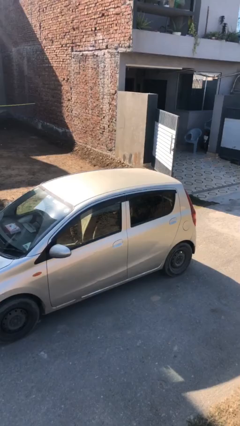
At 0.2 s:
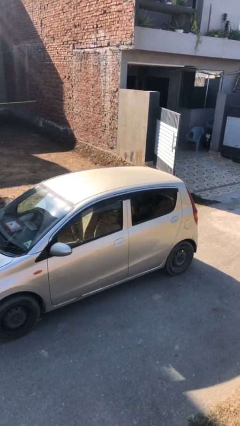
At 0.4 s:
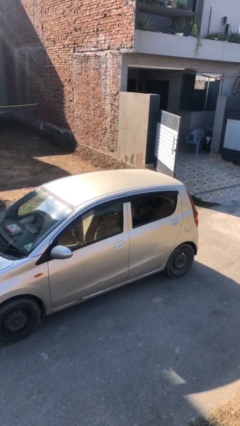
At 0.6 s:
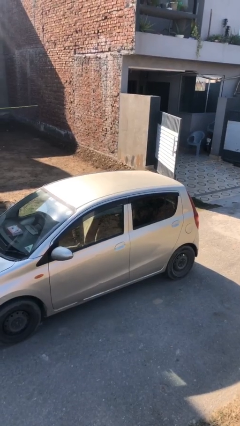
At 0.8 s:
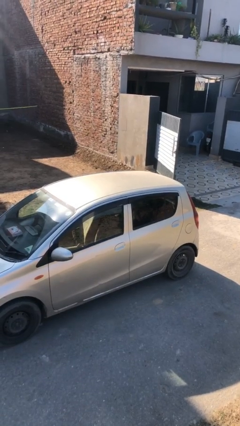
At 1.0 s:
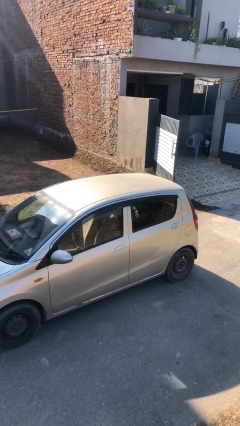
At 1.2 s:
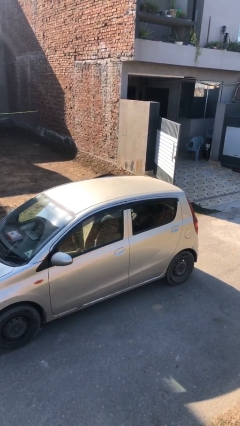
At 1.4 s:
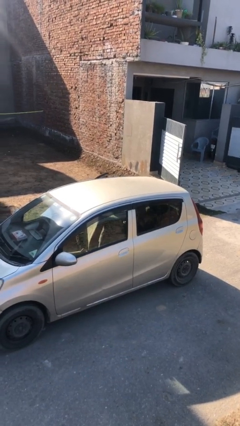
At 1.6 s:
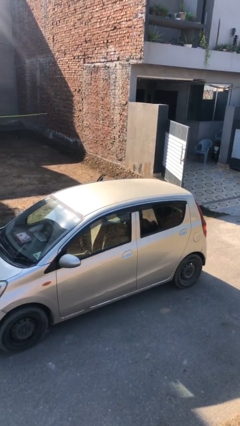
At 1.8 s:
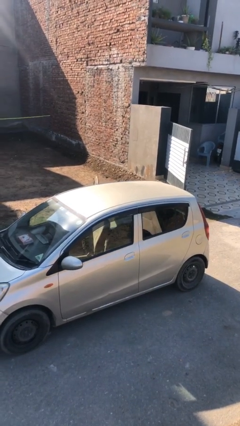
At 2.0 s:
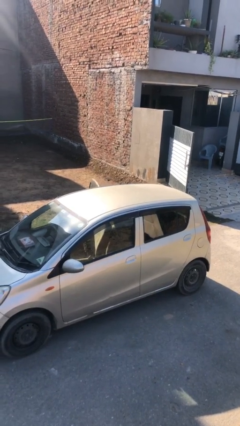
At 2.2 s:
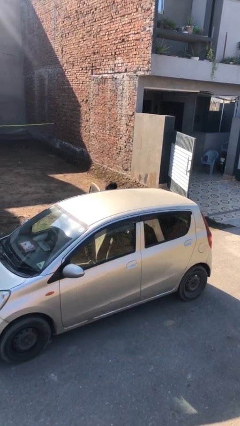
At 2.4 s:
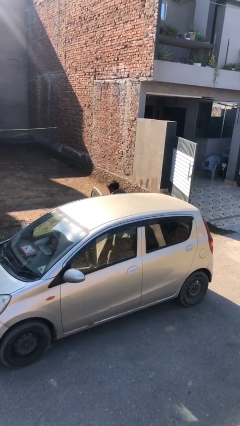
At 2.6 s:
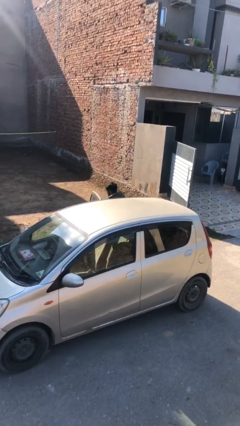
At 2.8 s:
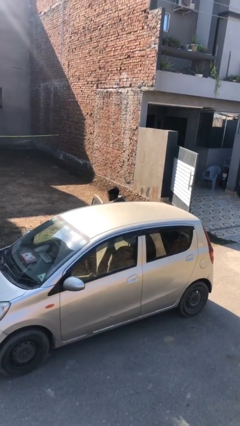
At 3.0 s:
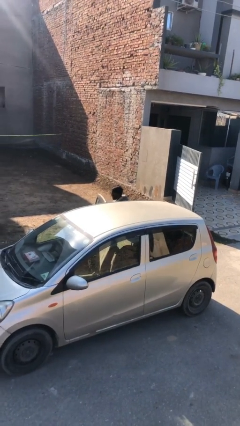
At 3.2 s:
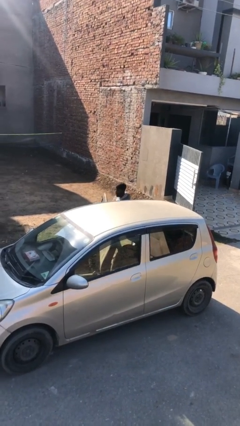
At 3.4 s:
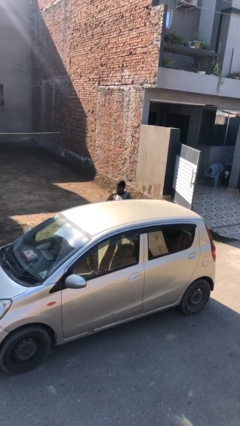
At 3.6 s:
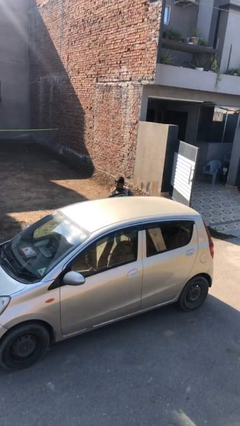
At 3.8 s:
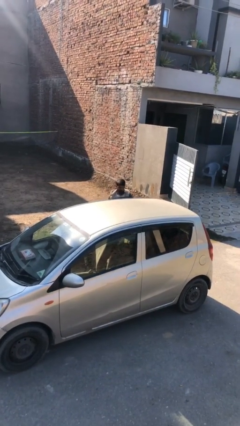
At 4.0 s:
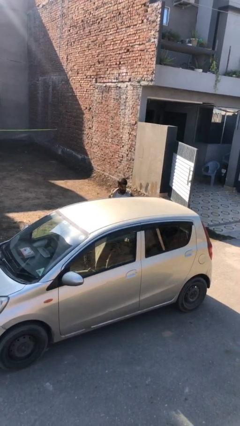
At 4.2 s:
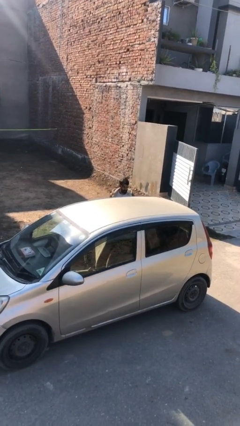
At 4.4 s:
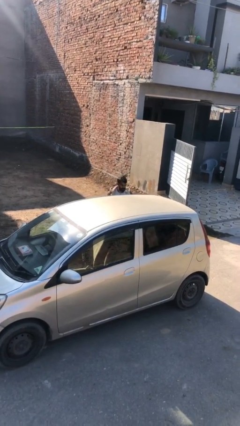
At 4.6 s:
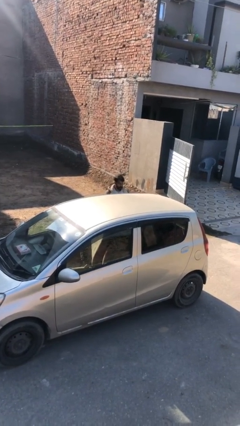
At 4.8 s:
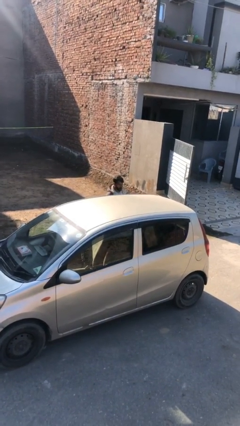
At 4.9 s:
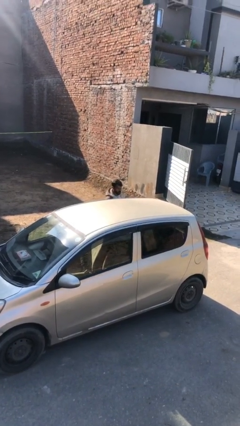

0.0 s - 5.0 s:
car drops off person

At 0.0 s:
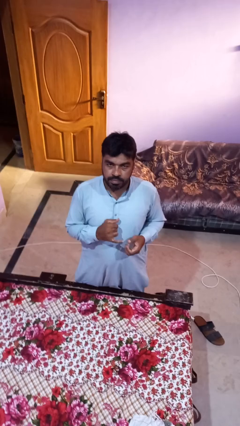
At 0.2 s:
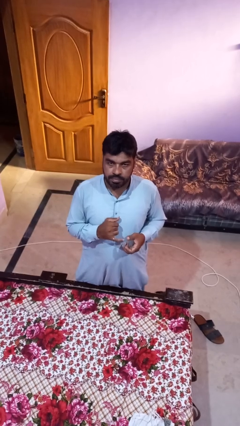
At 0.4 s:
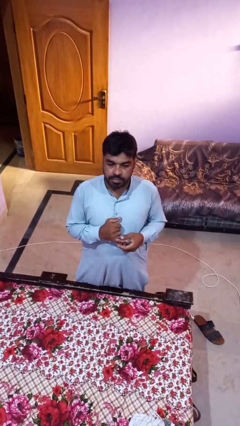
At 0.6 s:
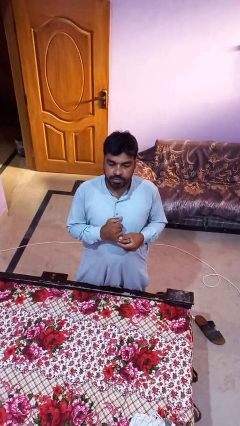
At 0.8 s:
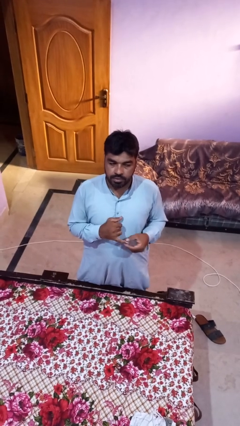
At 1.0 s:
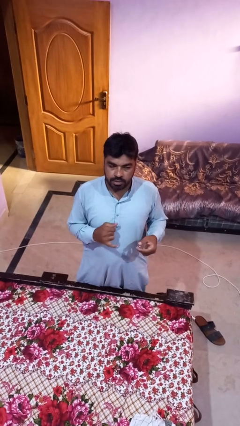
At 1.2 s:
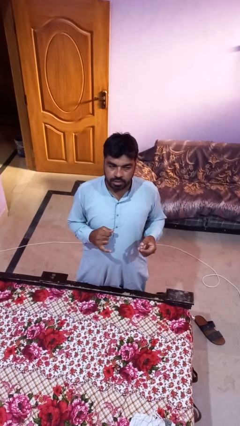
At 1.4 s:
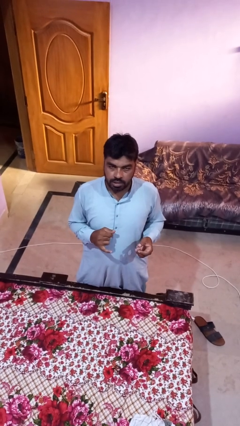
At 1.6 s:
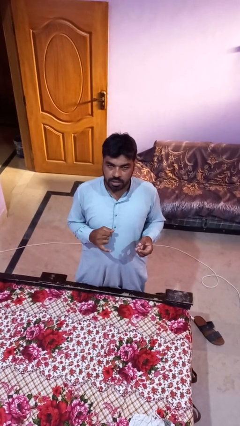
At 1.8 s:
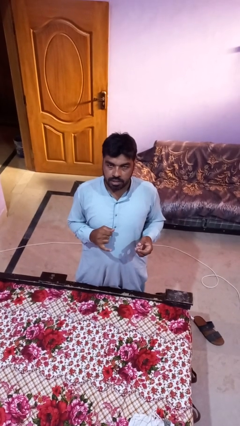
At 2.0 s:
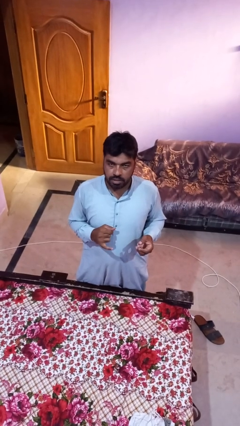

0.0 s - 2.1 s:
person takes off ring

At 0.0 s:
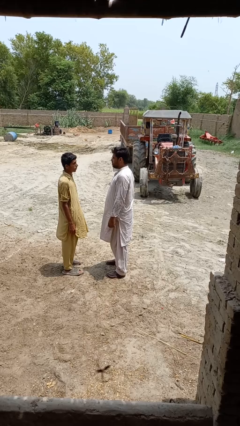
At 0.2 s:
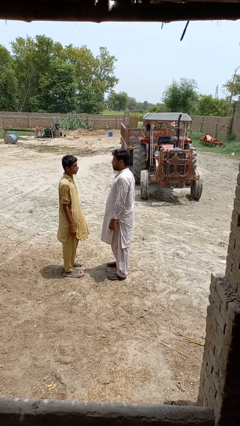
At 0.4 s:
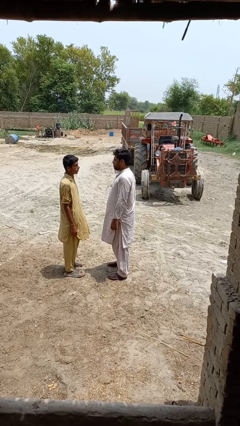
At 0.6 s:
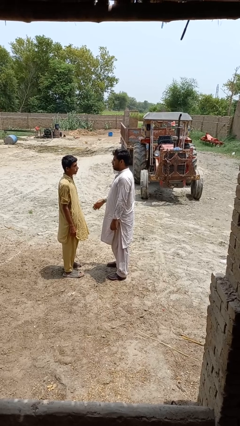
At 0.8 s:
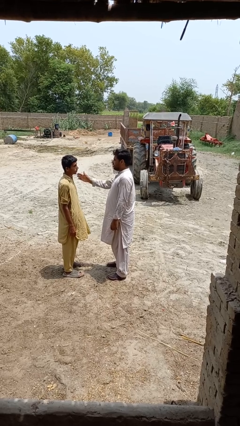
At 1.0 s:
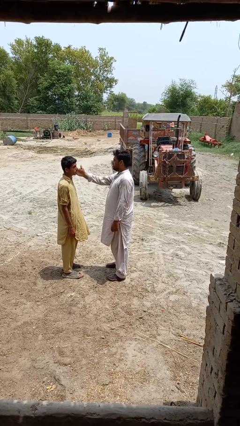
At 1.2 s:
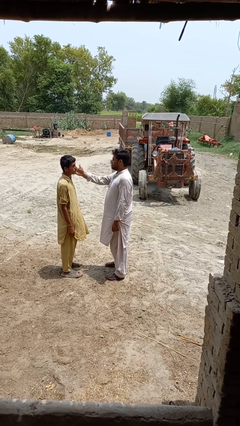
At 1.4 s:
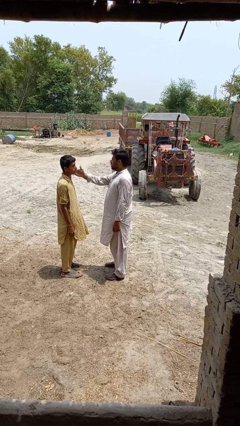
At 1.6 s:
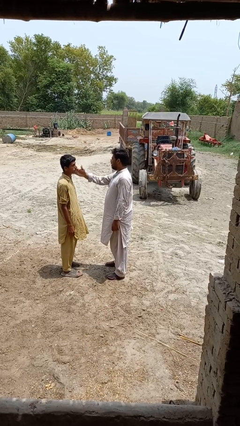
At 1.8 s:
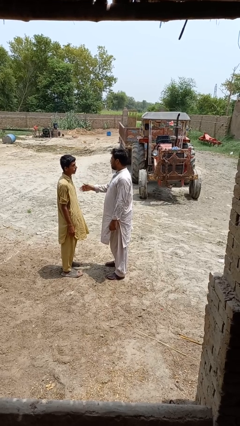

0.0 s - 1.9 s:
person touches face of person

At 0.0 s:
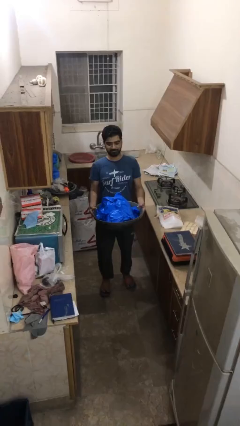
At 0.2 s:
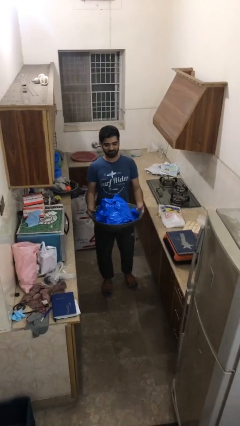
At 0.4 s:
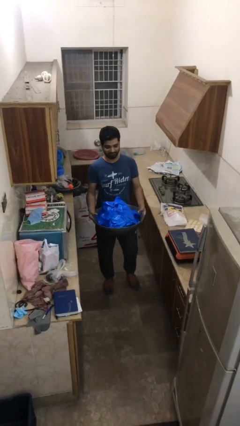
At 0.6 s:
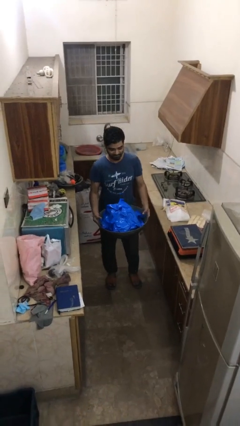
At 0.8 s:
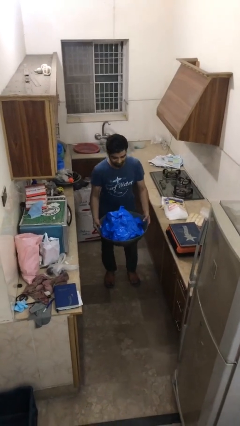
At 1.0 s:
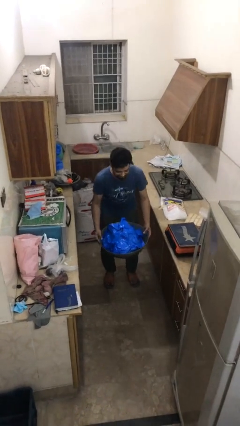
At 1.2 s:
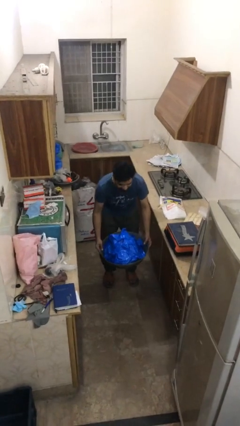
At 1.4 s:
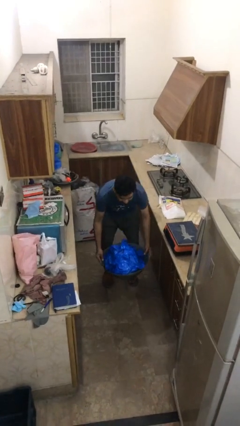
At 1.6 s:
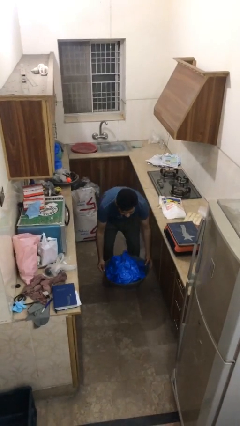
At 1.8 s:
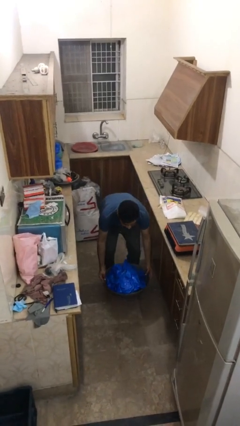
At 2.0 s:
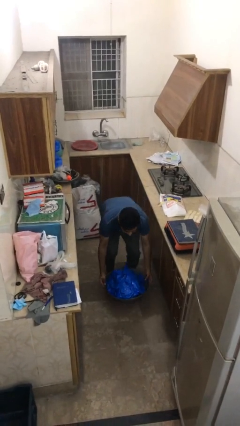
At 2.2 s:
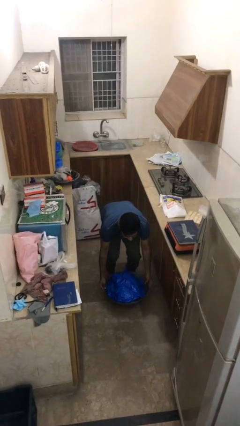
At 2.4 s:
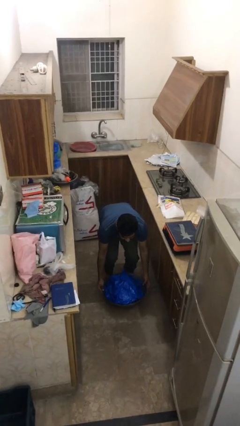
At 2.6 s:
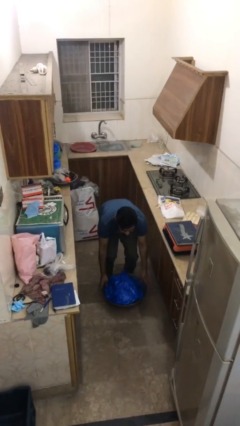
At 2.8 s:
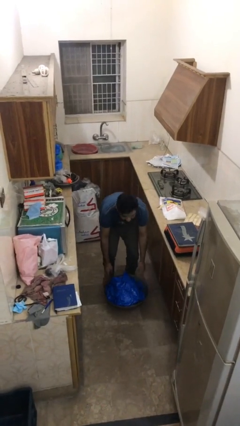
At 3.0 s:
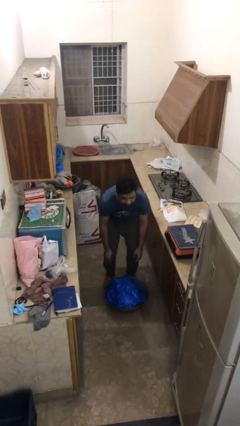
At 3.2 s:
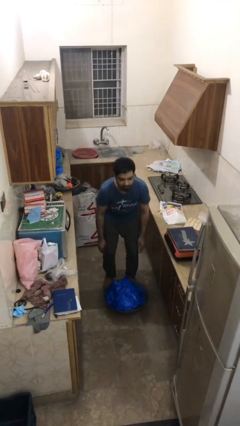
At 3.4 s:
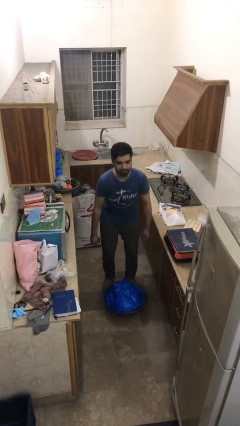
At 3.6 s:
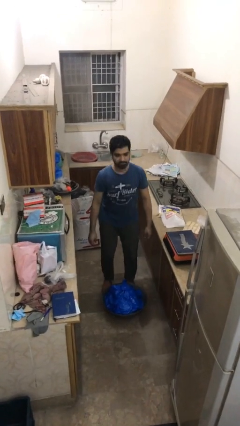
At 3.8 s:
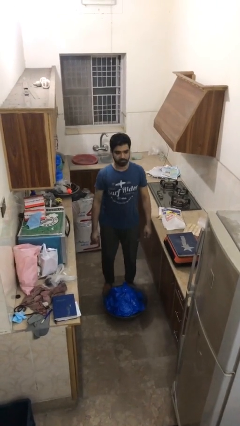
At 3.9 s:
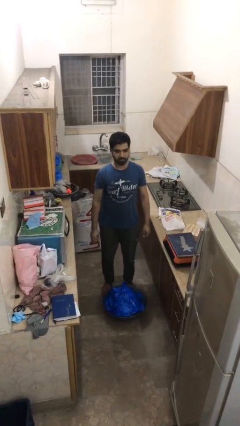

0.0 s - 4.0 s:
person puts down object on floor

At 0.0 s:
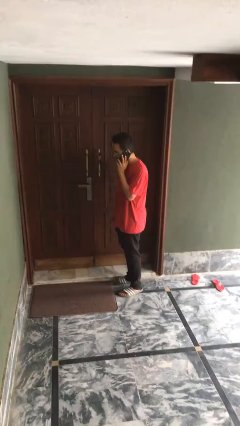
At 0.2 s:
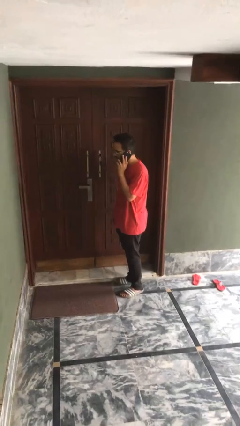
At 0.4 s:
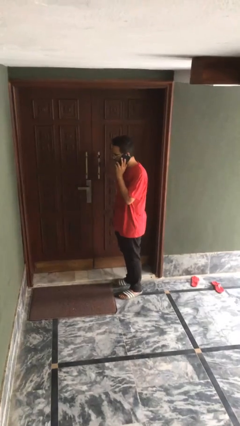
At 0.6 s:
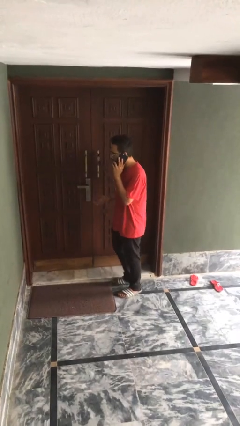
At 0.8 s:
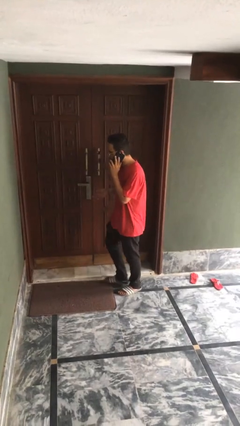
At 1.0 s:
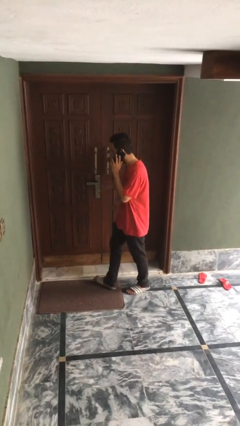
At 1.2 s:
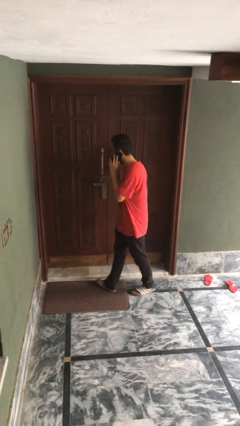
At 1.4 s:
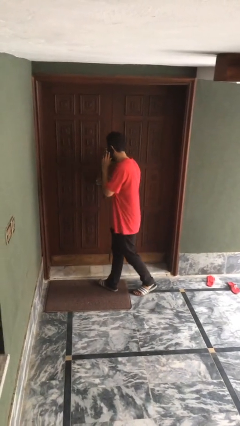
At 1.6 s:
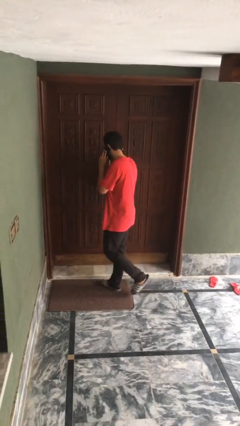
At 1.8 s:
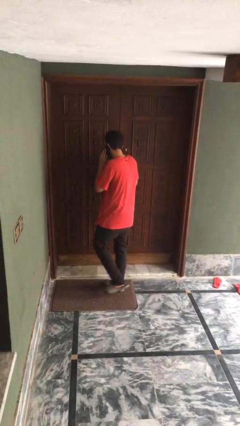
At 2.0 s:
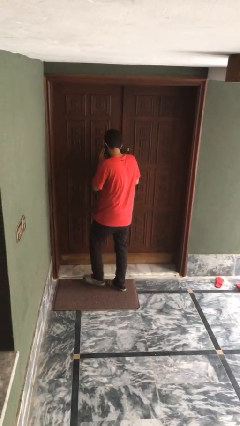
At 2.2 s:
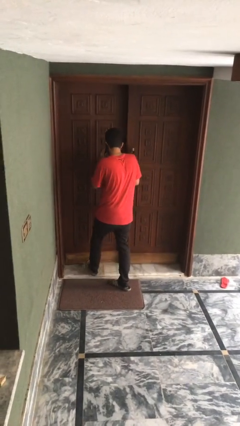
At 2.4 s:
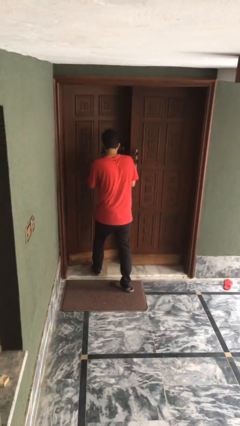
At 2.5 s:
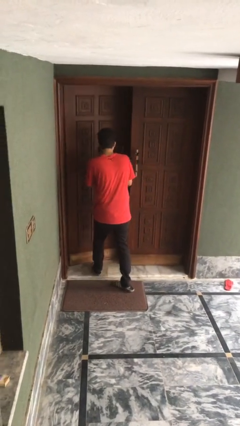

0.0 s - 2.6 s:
person opens facility door

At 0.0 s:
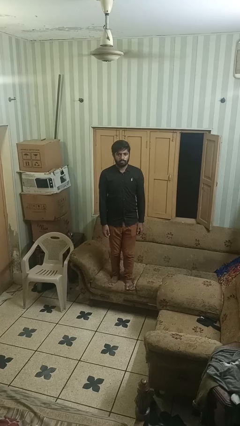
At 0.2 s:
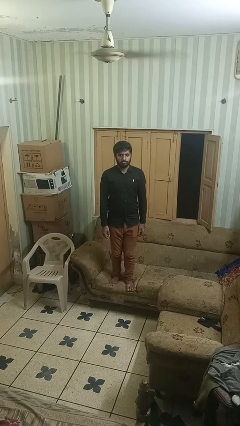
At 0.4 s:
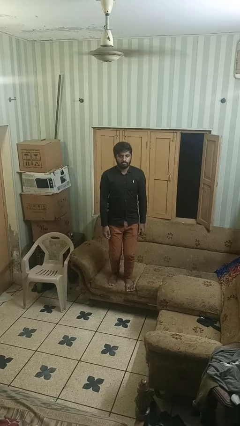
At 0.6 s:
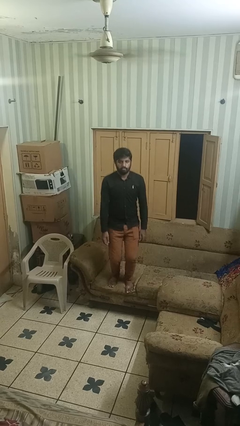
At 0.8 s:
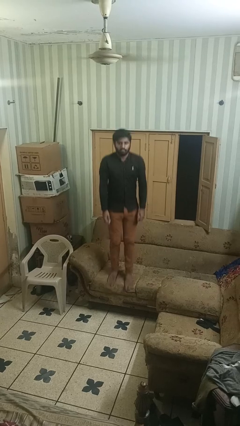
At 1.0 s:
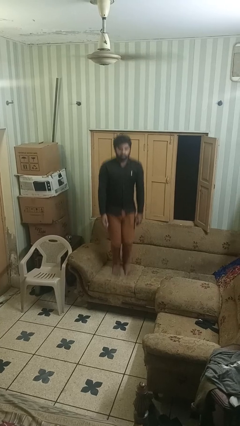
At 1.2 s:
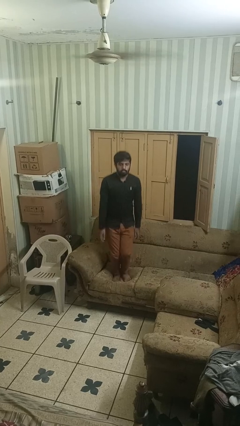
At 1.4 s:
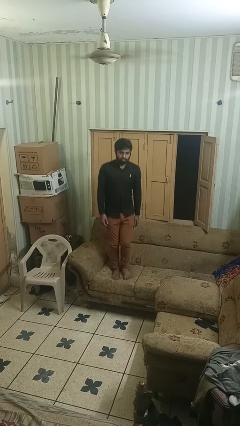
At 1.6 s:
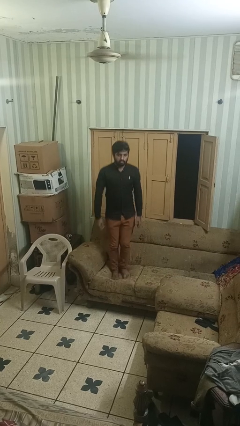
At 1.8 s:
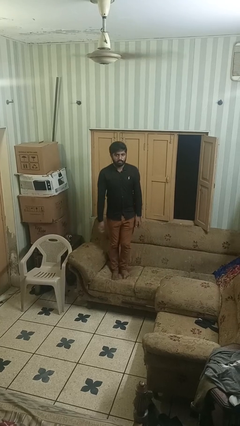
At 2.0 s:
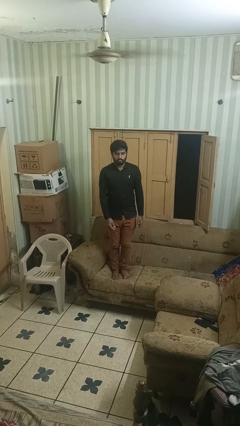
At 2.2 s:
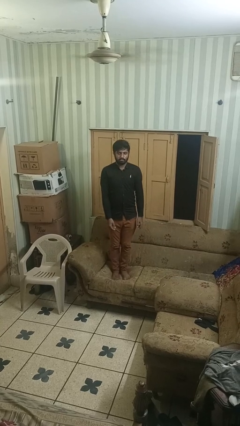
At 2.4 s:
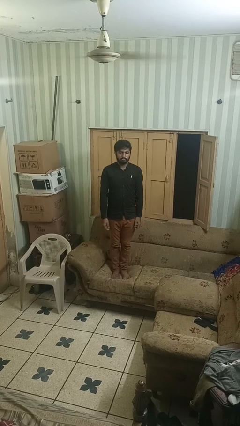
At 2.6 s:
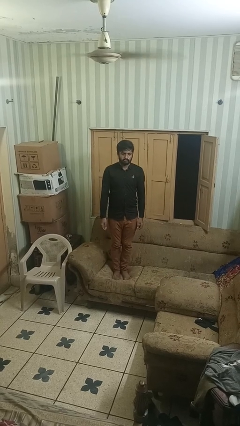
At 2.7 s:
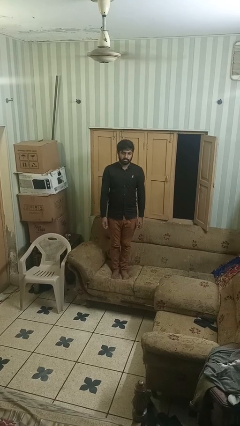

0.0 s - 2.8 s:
person jumps on couch
